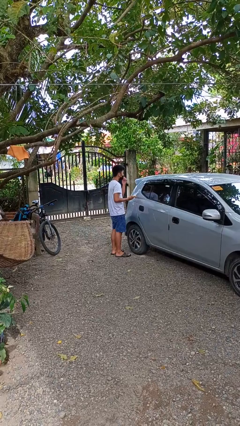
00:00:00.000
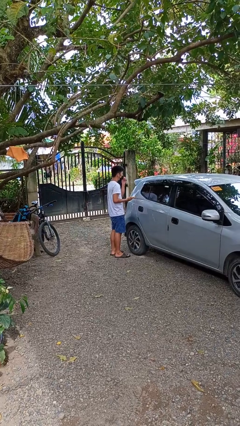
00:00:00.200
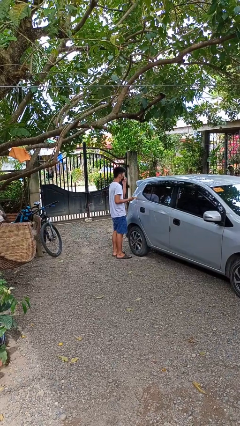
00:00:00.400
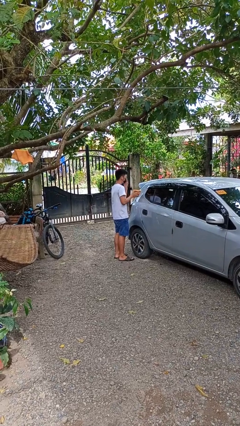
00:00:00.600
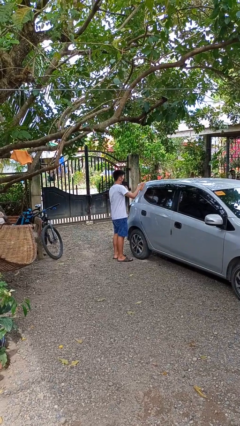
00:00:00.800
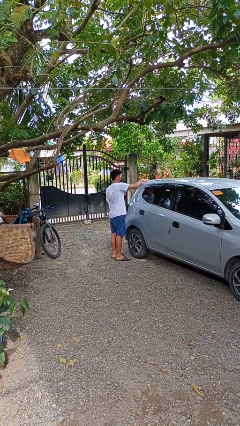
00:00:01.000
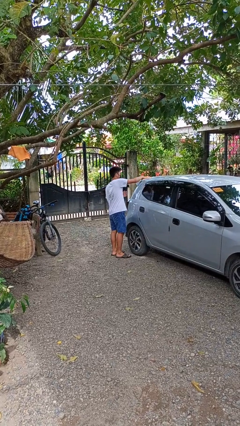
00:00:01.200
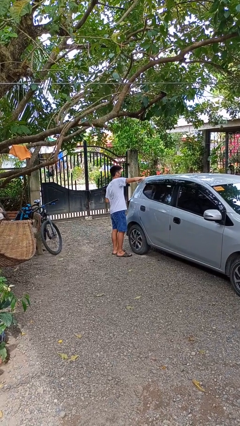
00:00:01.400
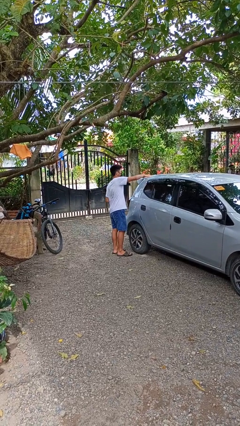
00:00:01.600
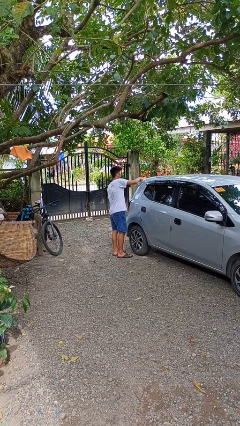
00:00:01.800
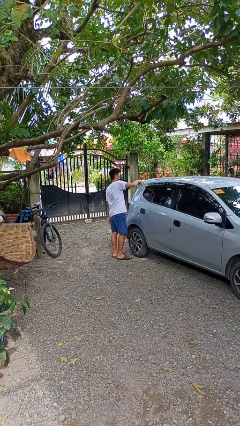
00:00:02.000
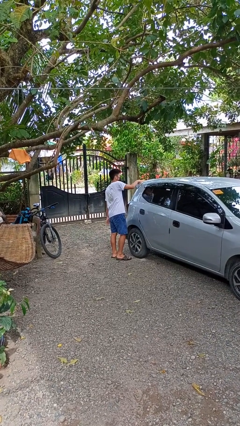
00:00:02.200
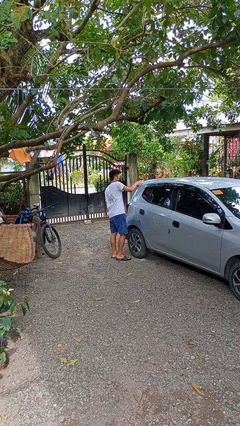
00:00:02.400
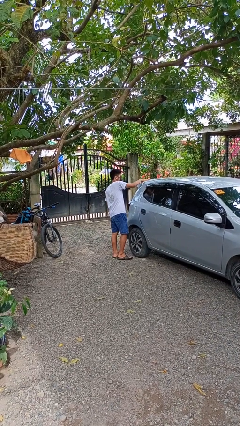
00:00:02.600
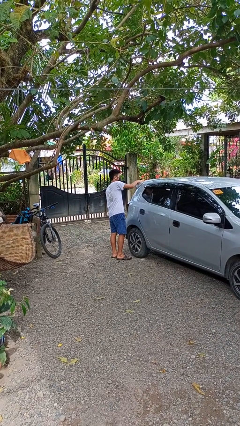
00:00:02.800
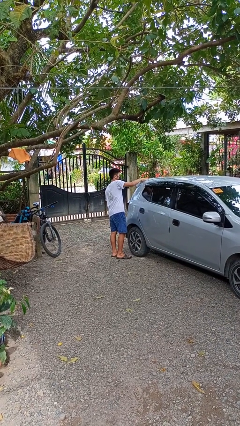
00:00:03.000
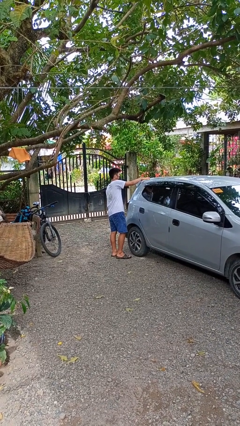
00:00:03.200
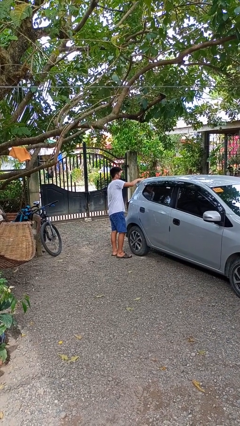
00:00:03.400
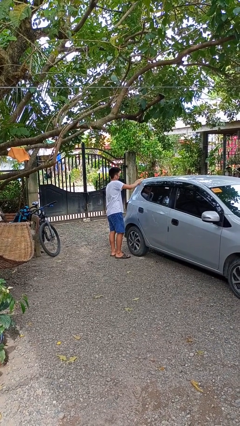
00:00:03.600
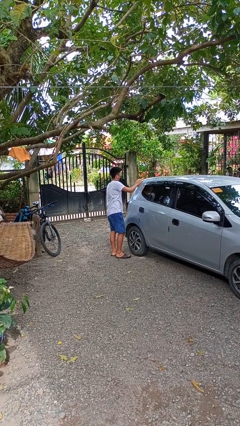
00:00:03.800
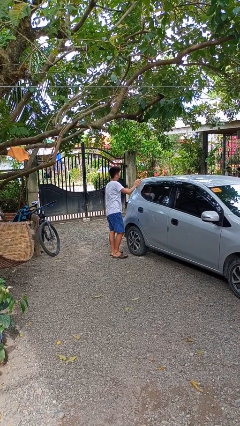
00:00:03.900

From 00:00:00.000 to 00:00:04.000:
person polishes car with rag

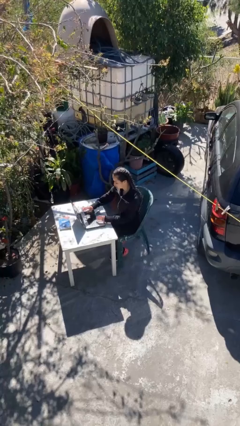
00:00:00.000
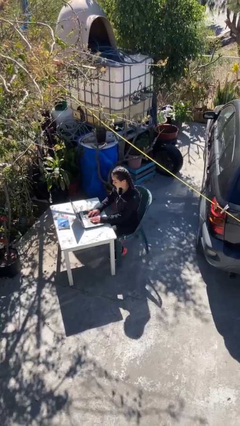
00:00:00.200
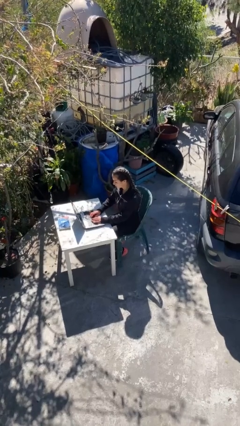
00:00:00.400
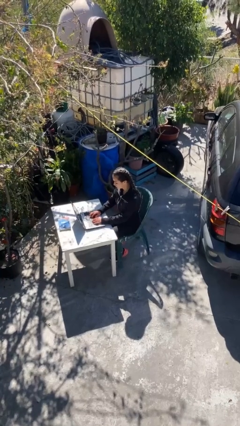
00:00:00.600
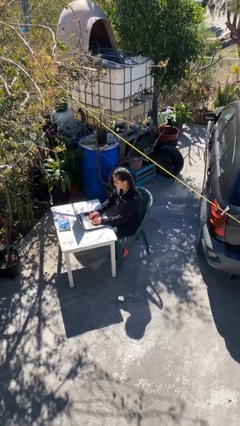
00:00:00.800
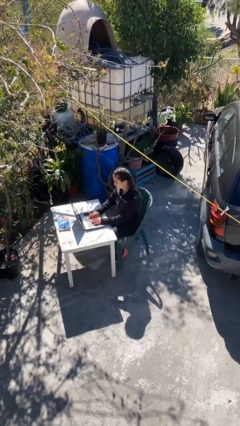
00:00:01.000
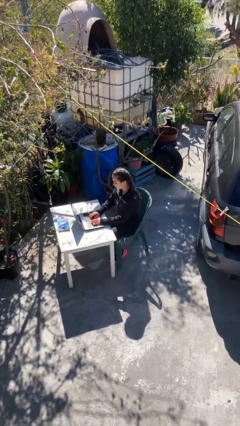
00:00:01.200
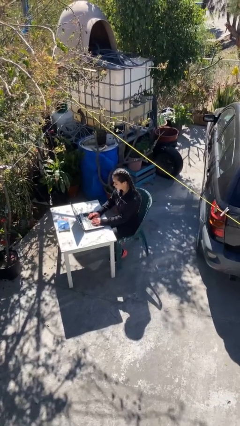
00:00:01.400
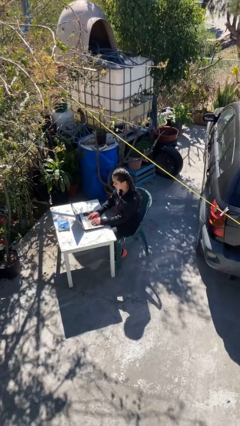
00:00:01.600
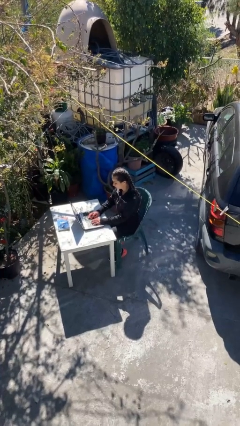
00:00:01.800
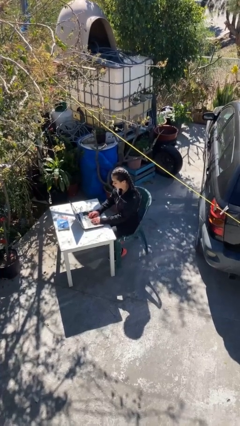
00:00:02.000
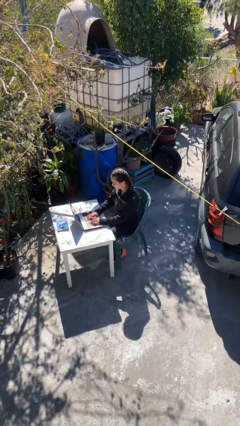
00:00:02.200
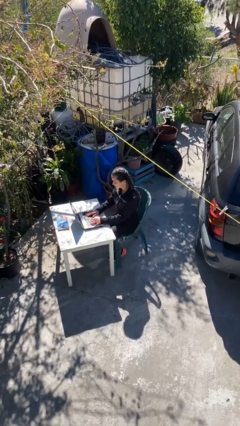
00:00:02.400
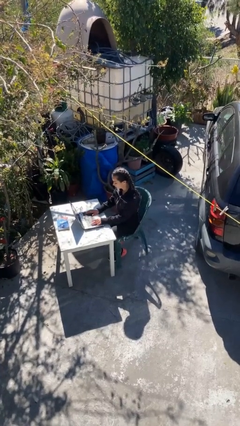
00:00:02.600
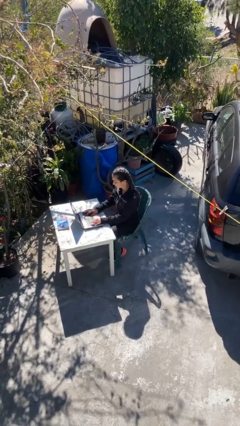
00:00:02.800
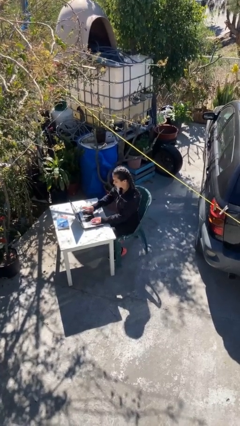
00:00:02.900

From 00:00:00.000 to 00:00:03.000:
person interacts with laptop

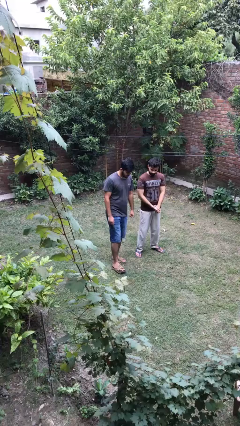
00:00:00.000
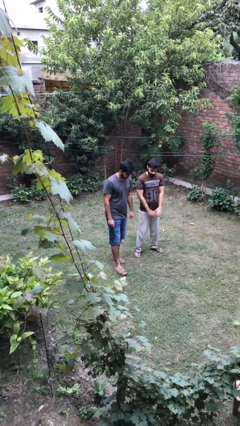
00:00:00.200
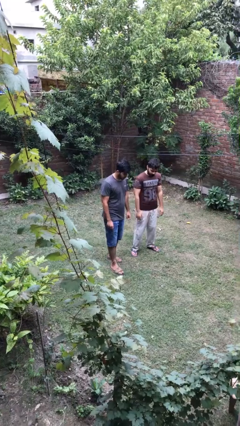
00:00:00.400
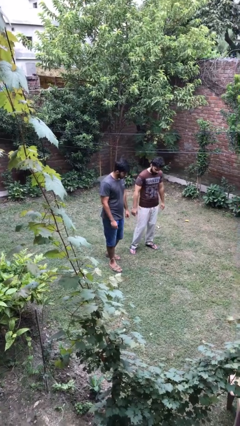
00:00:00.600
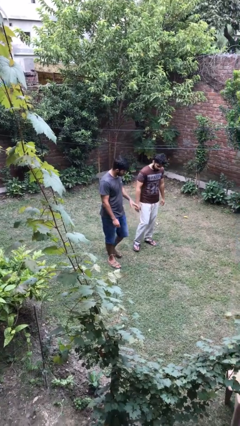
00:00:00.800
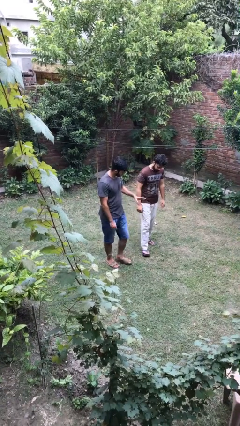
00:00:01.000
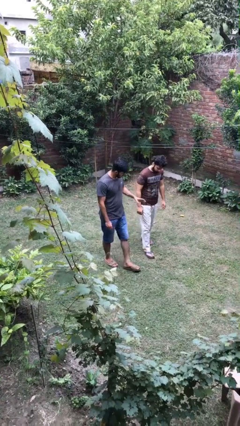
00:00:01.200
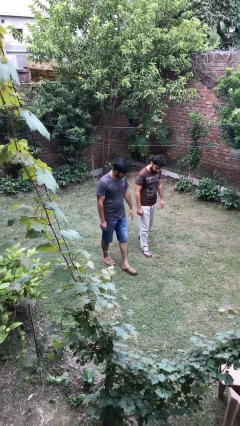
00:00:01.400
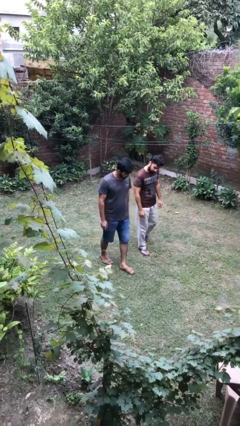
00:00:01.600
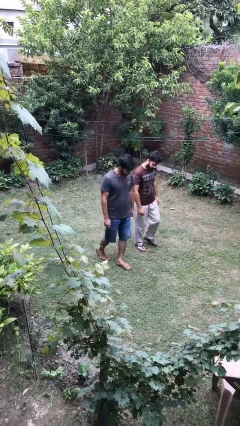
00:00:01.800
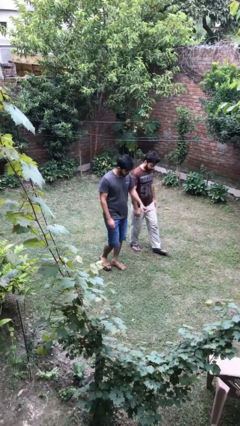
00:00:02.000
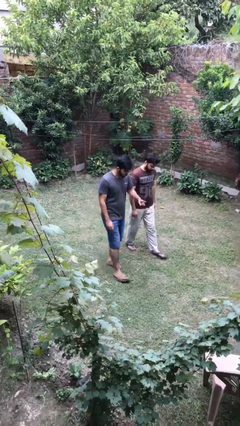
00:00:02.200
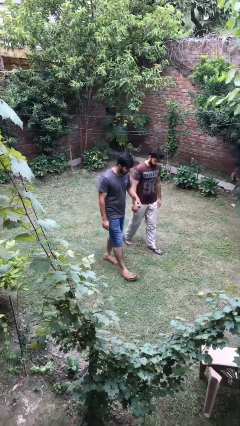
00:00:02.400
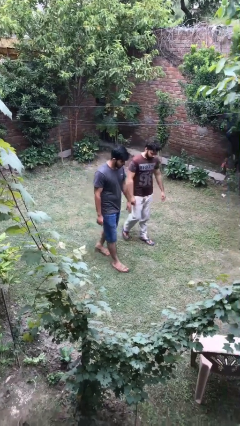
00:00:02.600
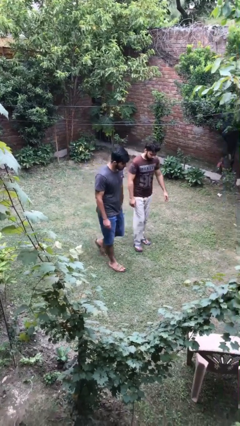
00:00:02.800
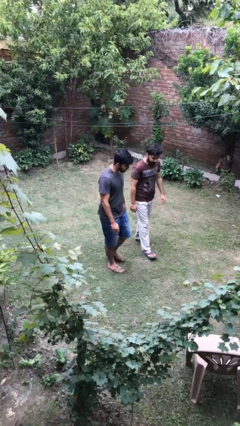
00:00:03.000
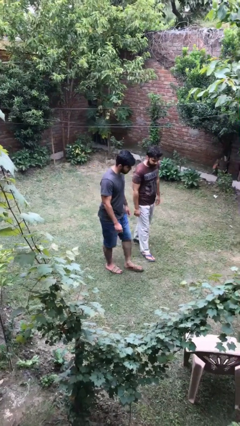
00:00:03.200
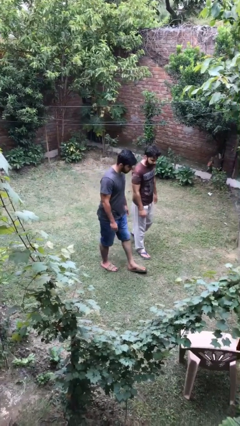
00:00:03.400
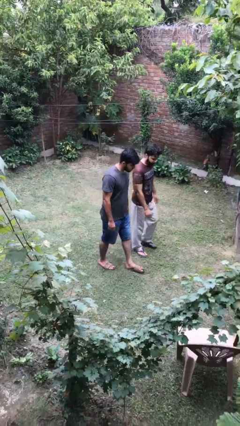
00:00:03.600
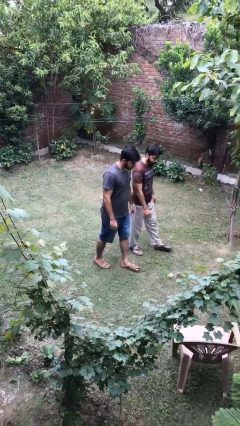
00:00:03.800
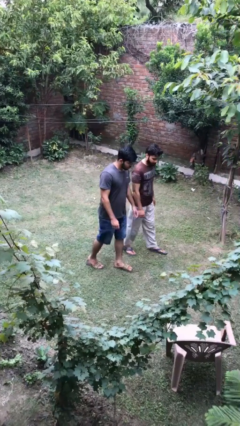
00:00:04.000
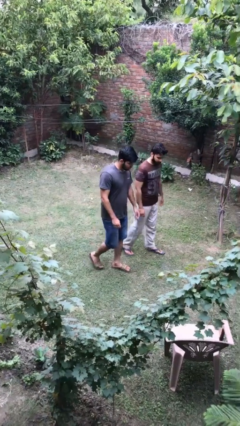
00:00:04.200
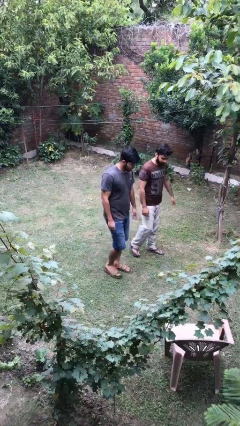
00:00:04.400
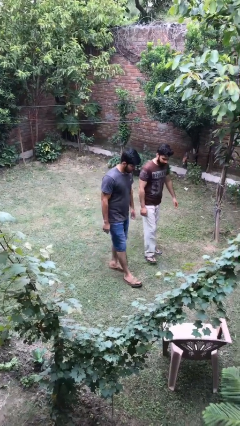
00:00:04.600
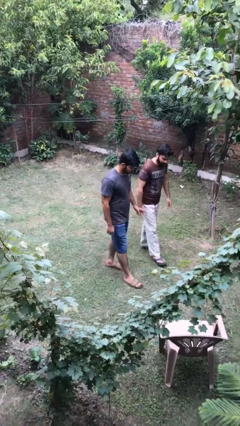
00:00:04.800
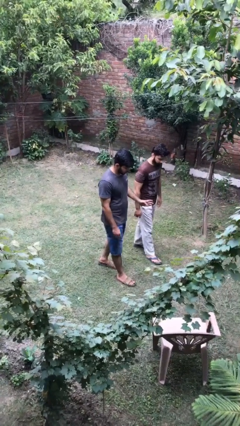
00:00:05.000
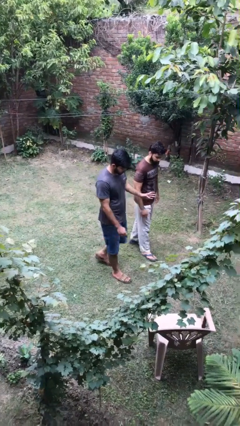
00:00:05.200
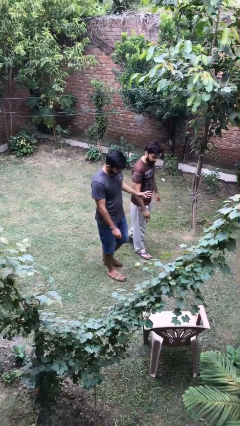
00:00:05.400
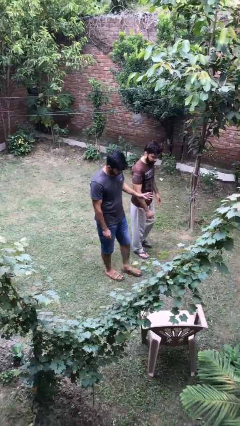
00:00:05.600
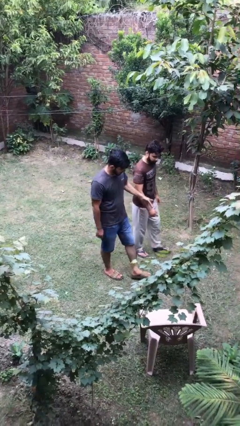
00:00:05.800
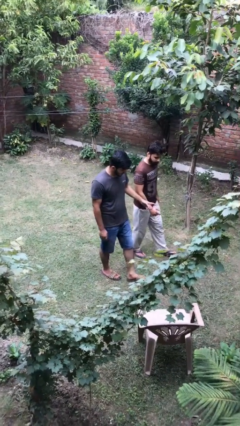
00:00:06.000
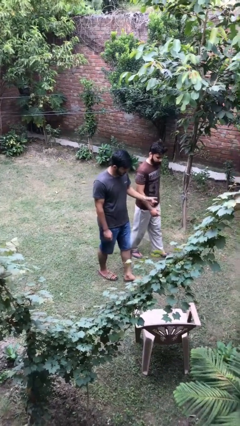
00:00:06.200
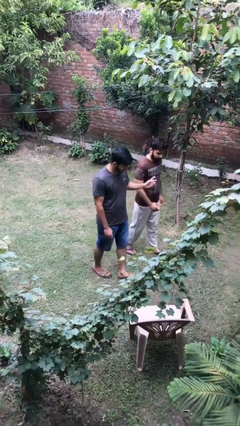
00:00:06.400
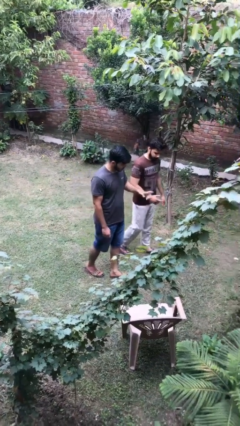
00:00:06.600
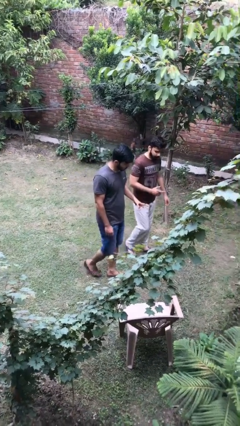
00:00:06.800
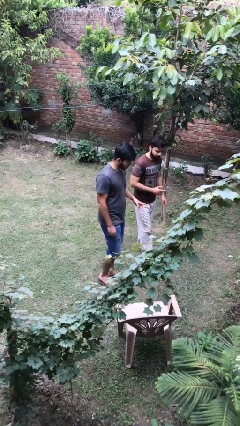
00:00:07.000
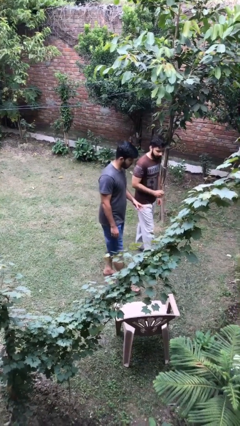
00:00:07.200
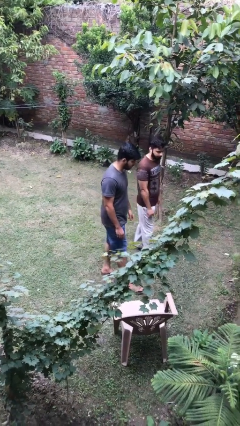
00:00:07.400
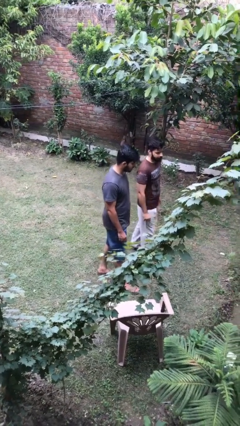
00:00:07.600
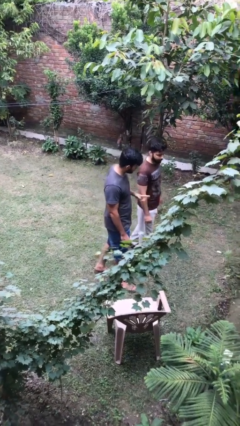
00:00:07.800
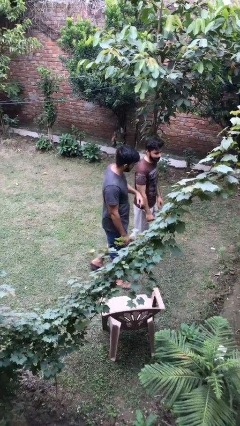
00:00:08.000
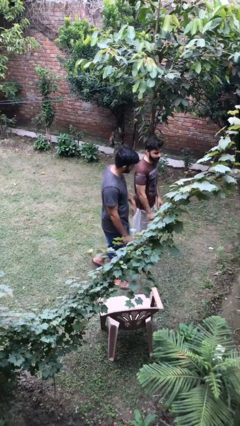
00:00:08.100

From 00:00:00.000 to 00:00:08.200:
person talks to person

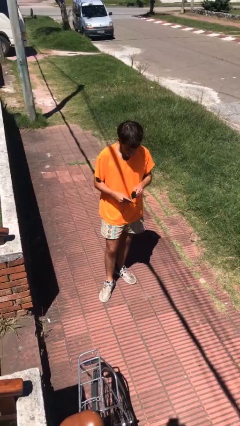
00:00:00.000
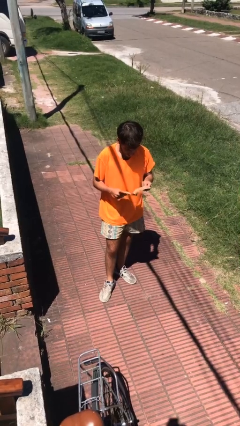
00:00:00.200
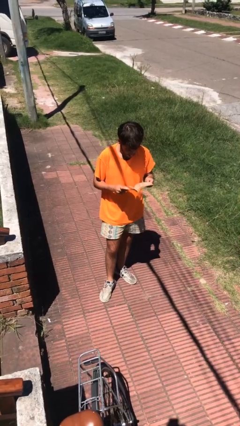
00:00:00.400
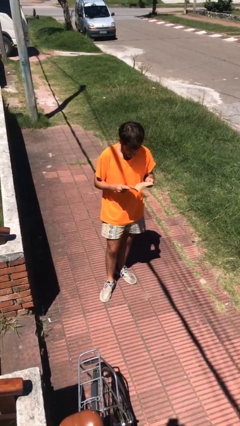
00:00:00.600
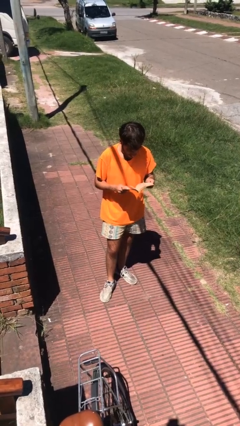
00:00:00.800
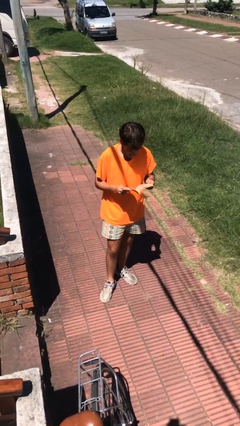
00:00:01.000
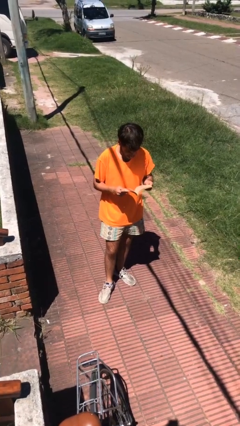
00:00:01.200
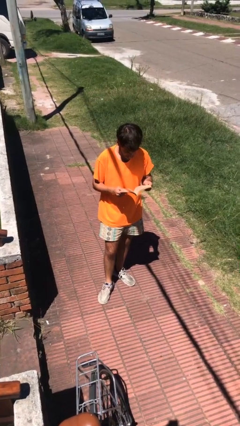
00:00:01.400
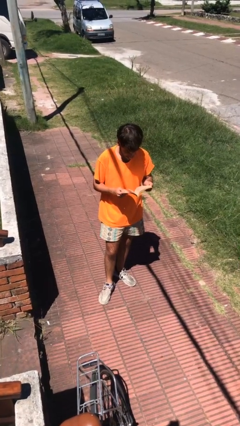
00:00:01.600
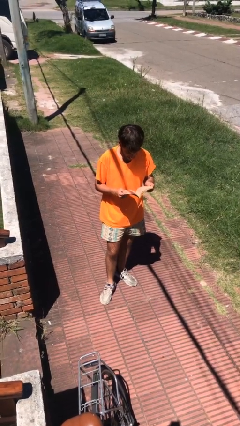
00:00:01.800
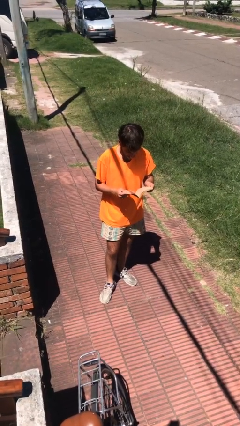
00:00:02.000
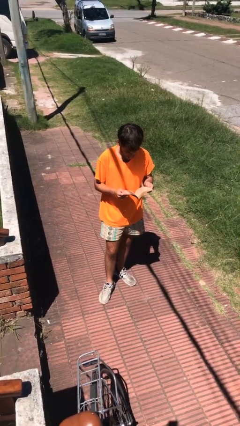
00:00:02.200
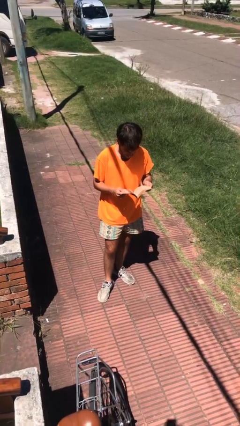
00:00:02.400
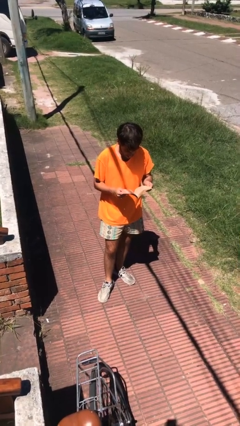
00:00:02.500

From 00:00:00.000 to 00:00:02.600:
person reads document
